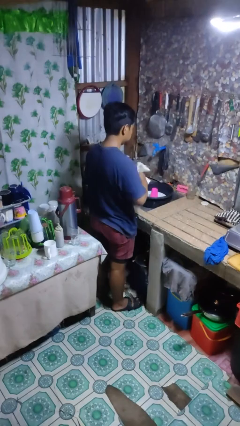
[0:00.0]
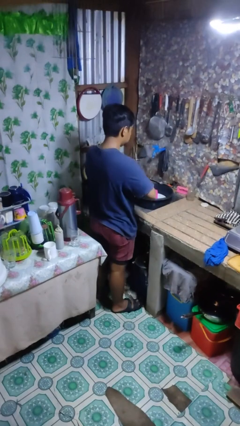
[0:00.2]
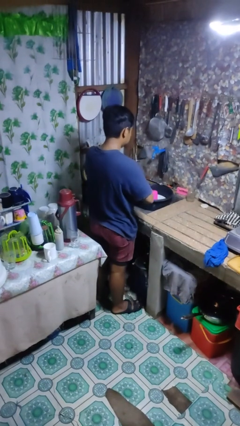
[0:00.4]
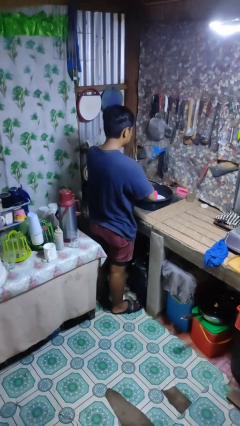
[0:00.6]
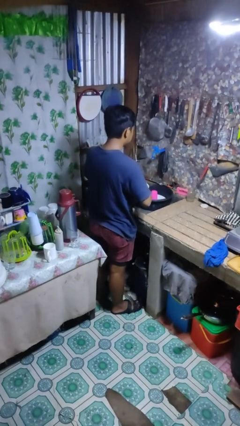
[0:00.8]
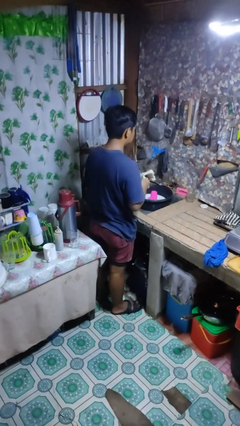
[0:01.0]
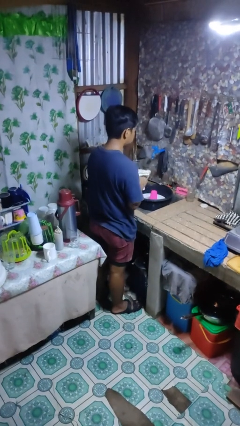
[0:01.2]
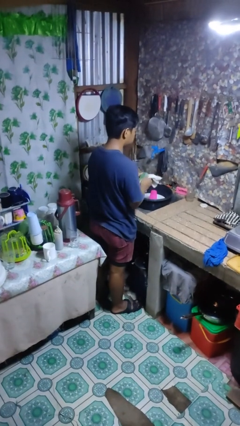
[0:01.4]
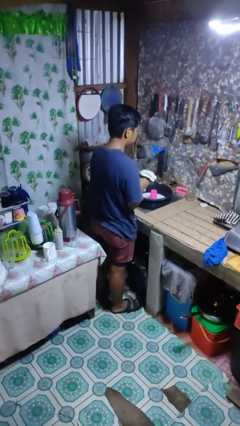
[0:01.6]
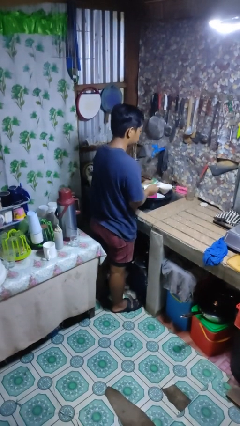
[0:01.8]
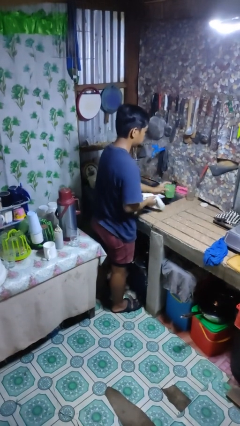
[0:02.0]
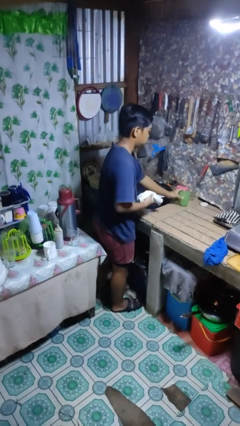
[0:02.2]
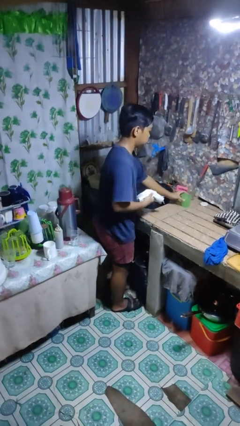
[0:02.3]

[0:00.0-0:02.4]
person dries dish

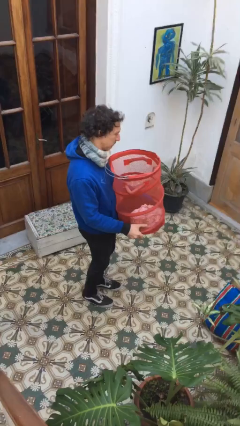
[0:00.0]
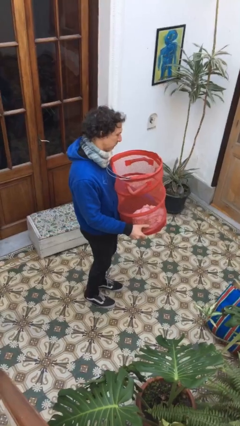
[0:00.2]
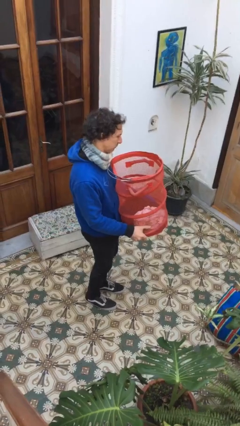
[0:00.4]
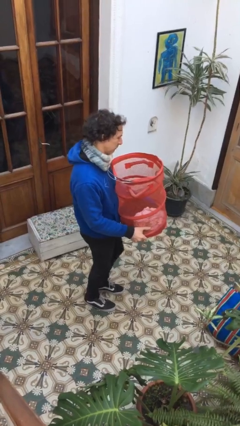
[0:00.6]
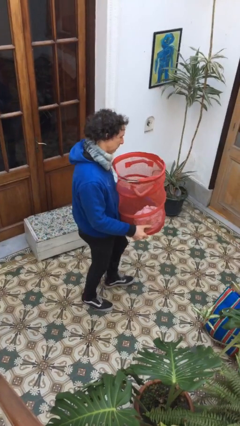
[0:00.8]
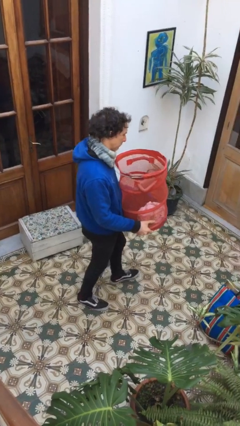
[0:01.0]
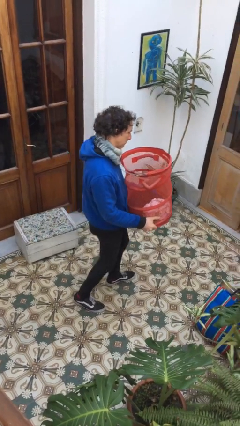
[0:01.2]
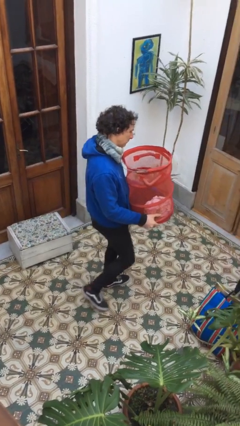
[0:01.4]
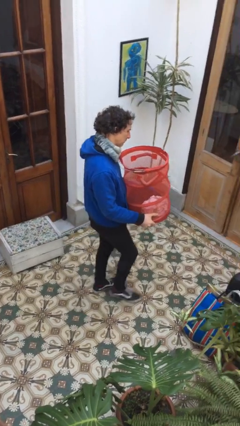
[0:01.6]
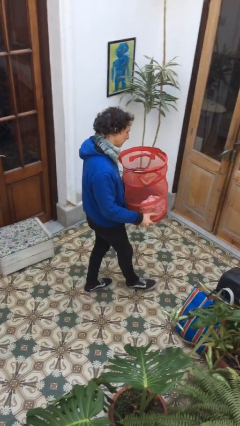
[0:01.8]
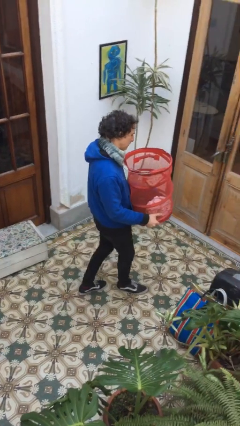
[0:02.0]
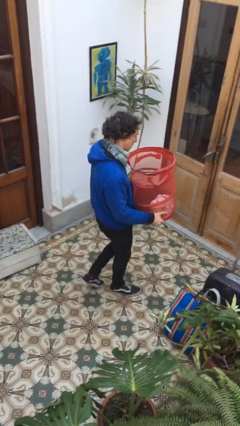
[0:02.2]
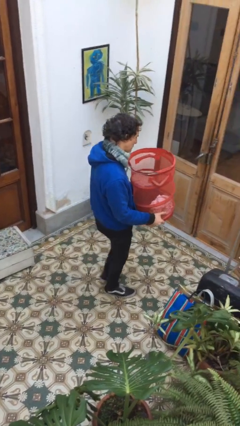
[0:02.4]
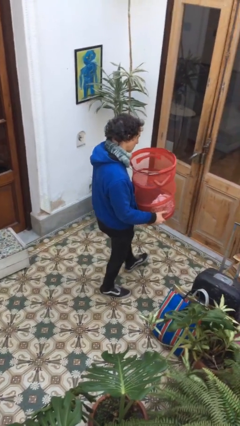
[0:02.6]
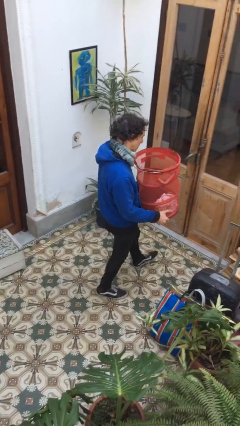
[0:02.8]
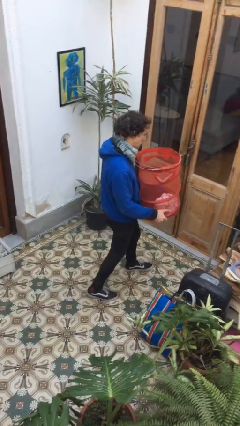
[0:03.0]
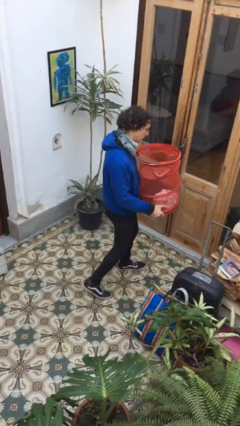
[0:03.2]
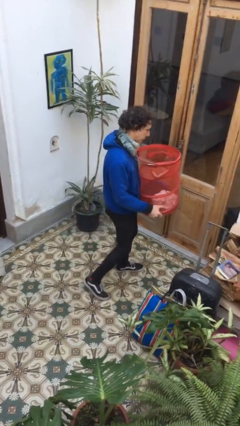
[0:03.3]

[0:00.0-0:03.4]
person carries laundry basket

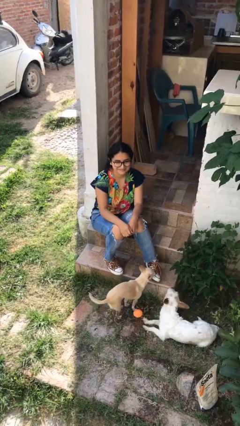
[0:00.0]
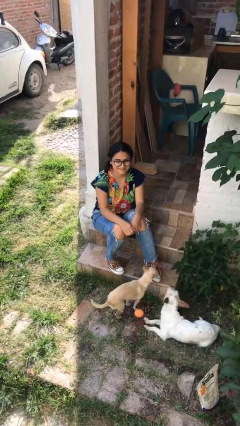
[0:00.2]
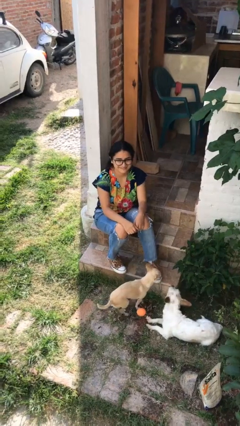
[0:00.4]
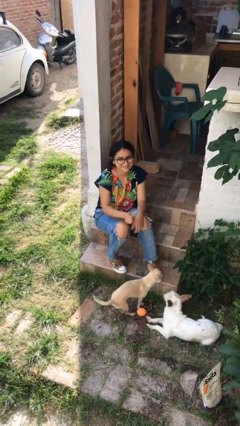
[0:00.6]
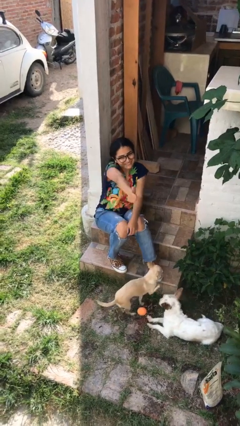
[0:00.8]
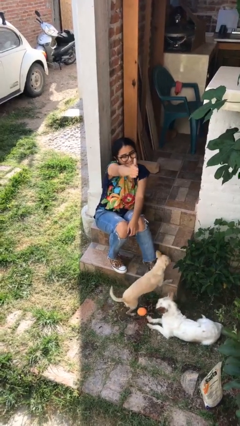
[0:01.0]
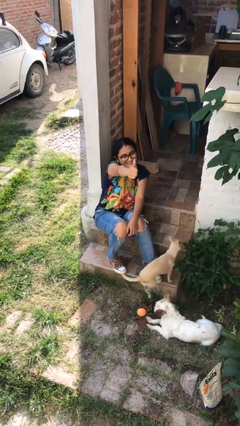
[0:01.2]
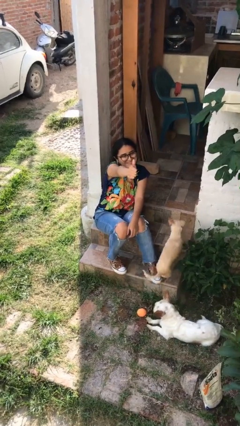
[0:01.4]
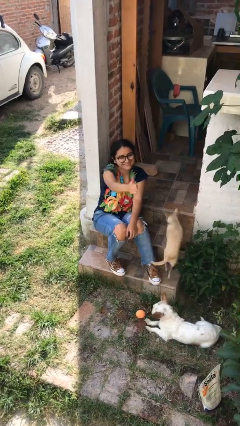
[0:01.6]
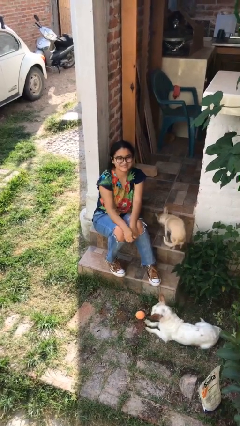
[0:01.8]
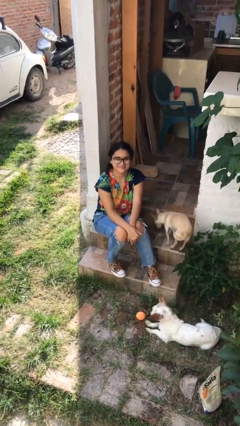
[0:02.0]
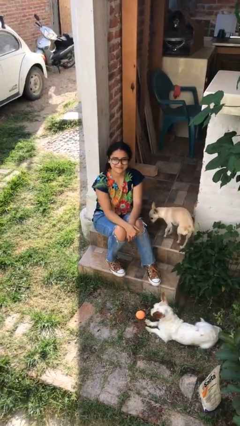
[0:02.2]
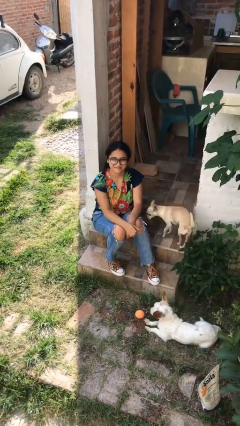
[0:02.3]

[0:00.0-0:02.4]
person gestures thumbs up

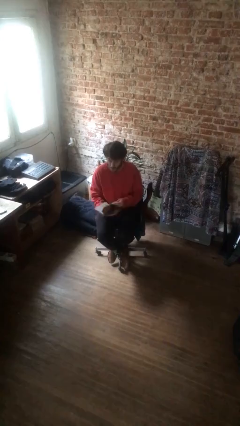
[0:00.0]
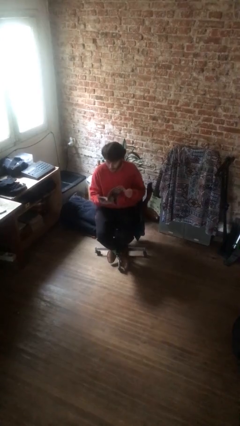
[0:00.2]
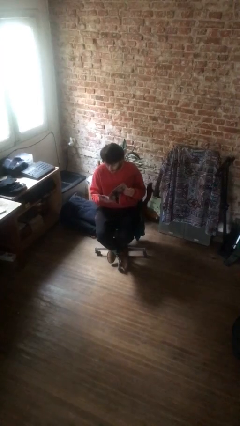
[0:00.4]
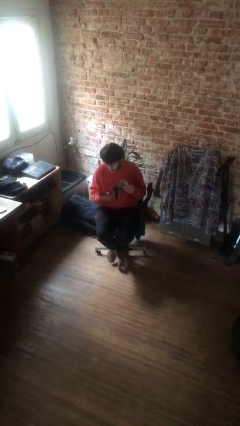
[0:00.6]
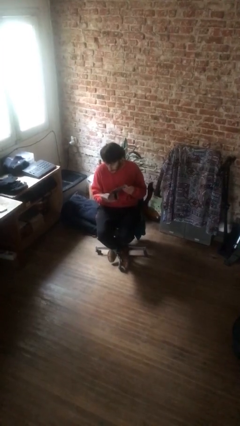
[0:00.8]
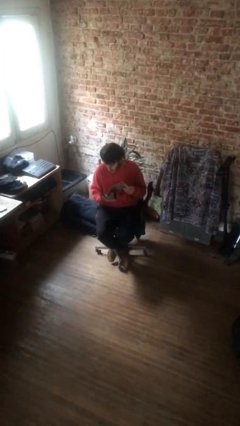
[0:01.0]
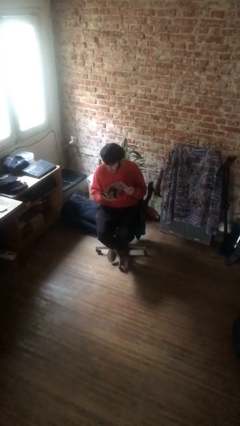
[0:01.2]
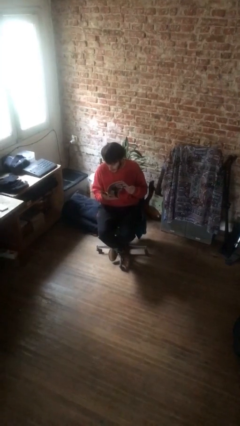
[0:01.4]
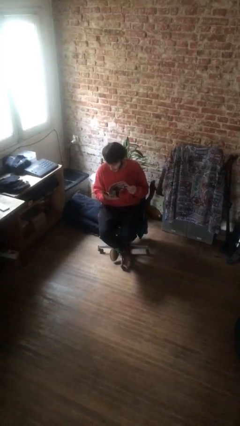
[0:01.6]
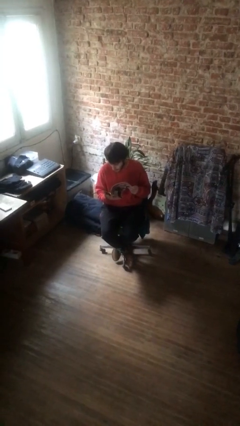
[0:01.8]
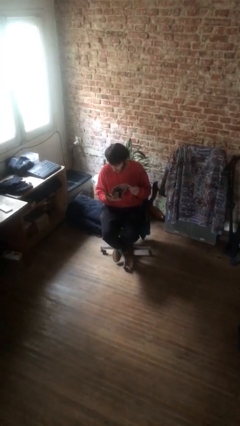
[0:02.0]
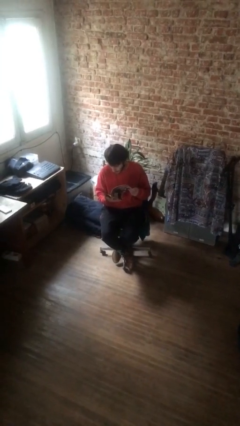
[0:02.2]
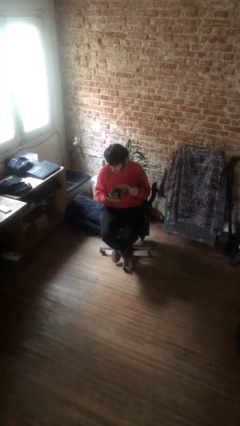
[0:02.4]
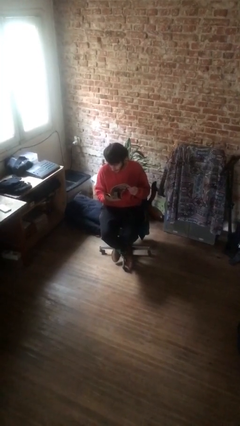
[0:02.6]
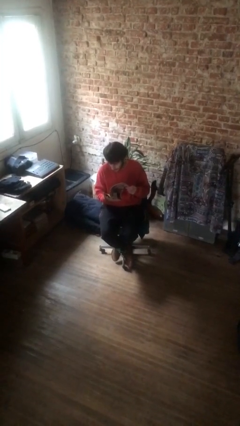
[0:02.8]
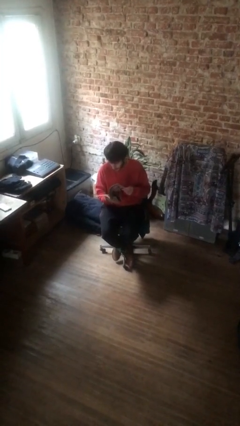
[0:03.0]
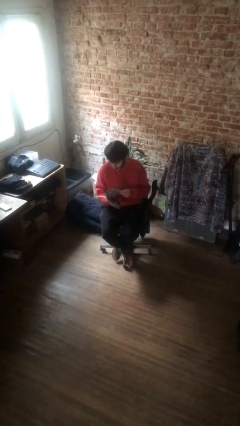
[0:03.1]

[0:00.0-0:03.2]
person reads magazine

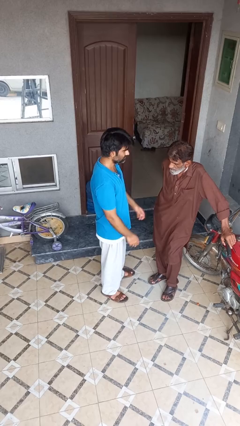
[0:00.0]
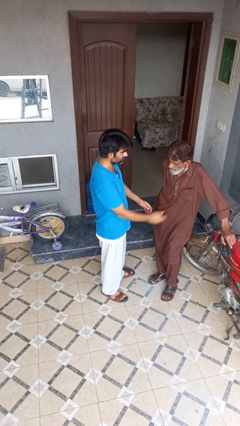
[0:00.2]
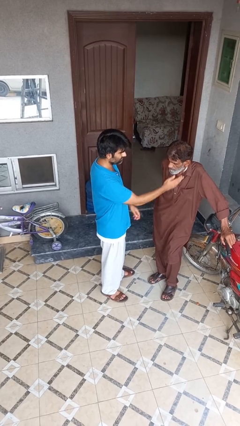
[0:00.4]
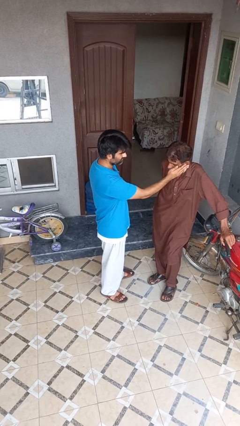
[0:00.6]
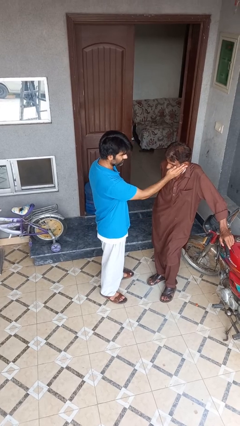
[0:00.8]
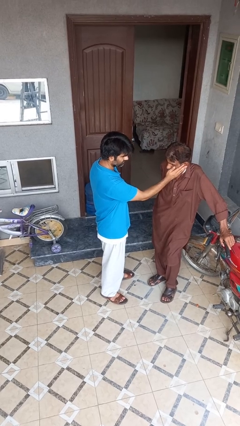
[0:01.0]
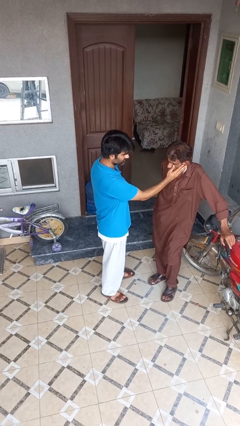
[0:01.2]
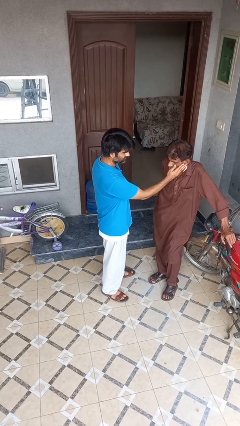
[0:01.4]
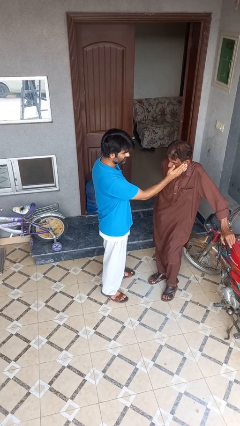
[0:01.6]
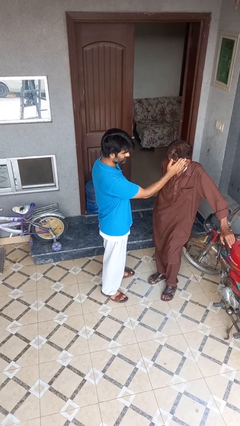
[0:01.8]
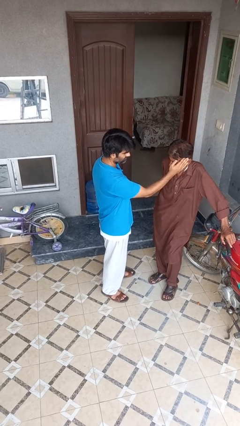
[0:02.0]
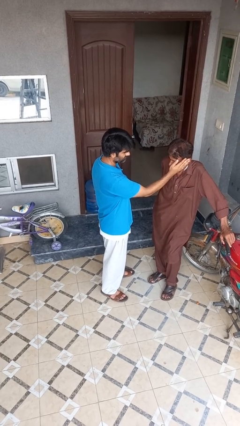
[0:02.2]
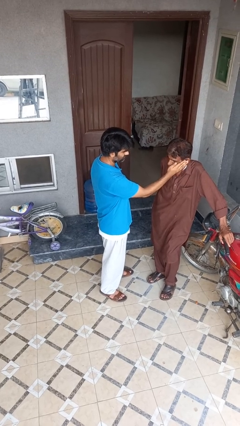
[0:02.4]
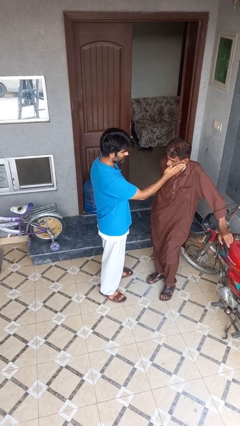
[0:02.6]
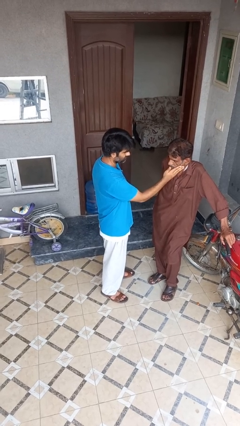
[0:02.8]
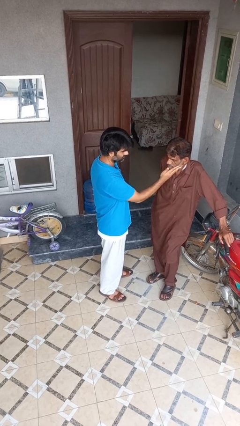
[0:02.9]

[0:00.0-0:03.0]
person touches face of person

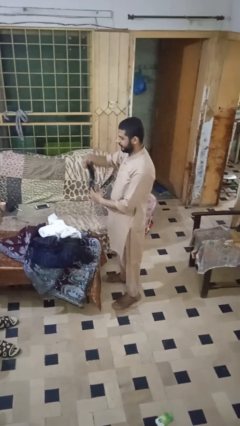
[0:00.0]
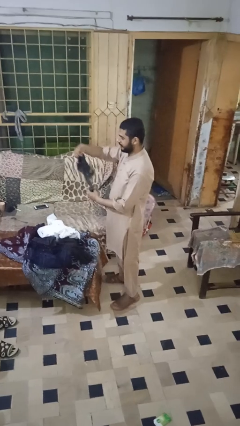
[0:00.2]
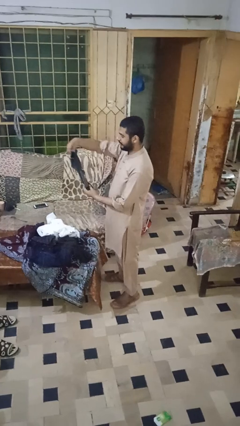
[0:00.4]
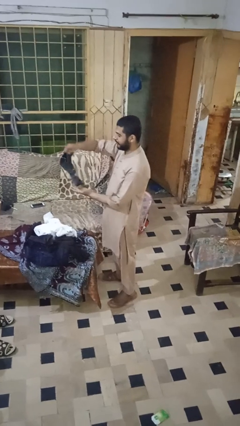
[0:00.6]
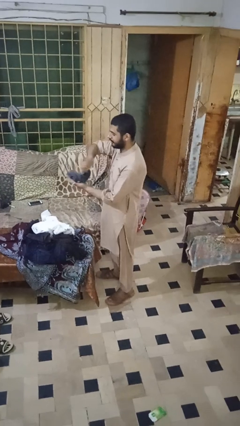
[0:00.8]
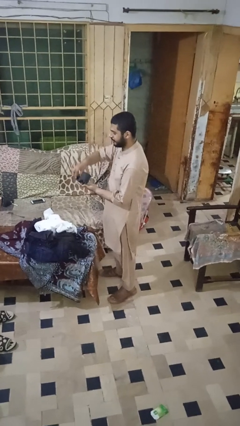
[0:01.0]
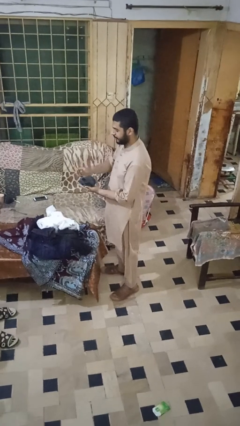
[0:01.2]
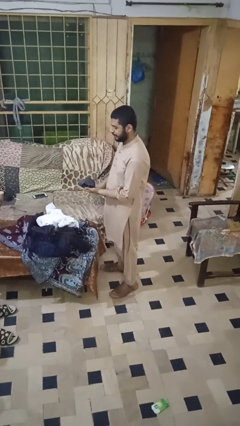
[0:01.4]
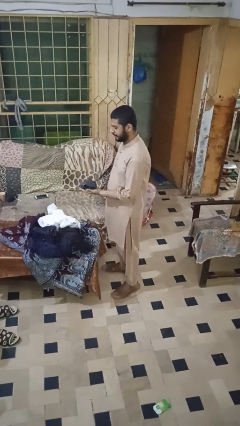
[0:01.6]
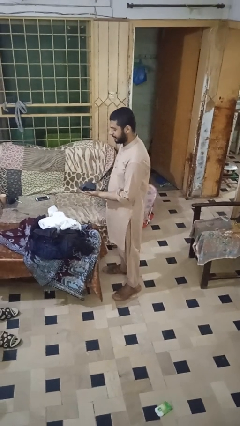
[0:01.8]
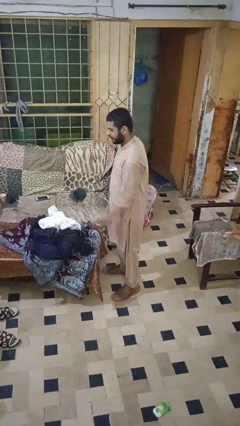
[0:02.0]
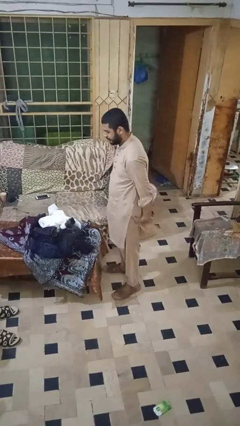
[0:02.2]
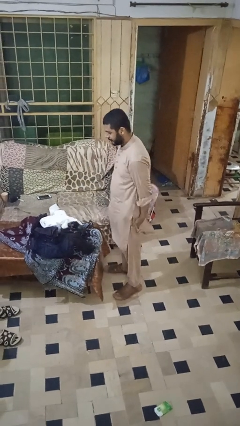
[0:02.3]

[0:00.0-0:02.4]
person folds socks

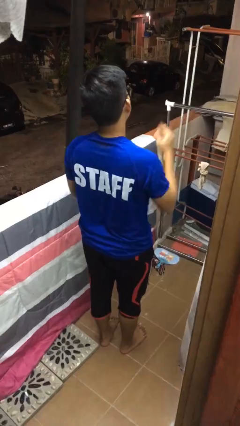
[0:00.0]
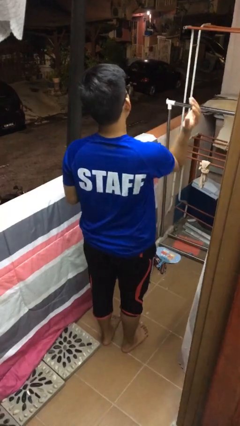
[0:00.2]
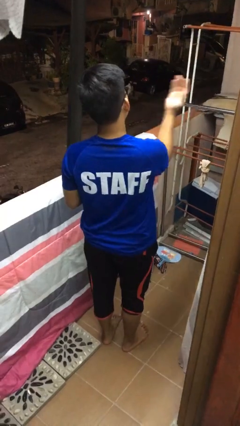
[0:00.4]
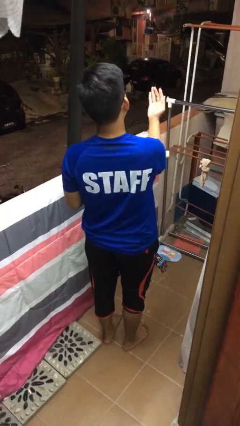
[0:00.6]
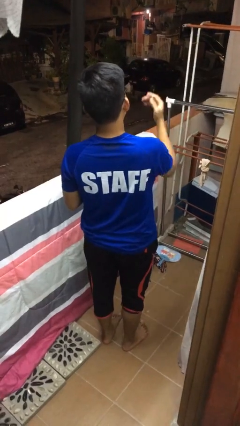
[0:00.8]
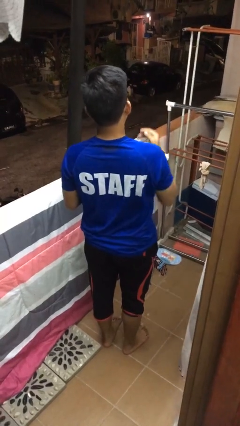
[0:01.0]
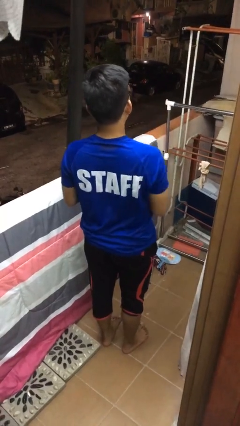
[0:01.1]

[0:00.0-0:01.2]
person karate chop
